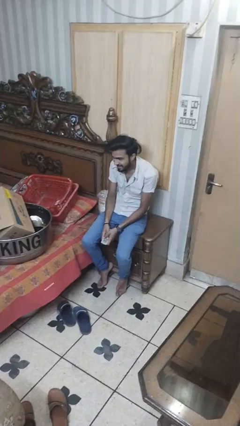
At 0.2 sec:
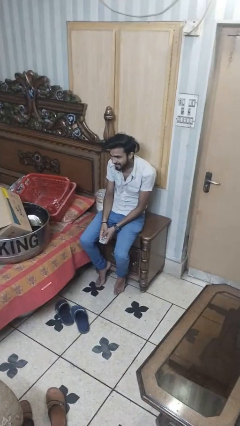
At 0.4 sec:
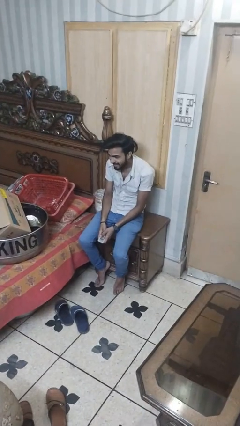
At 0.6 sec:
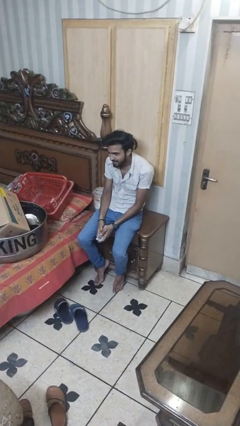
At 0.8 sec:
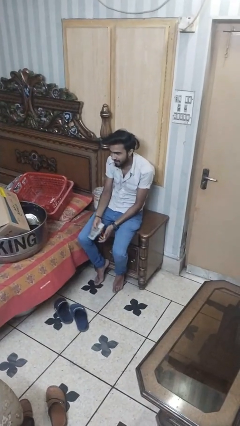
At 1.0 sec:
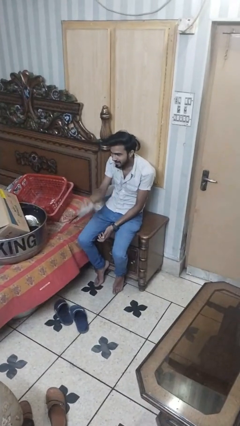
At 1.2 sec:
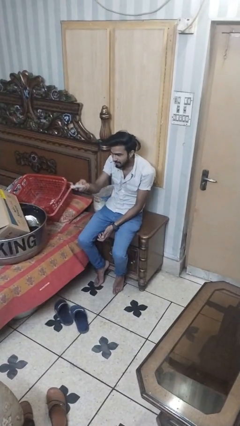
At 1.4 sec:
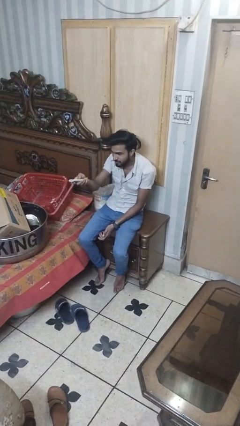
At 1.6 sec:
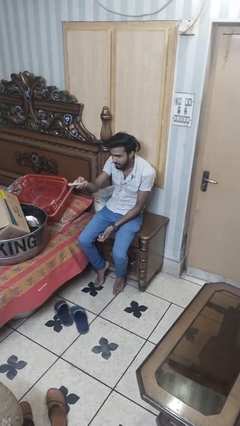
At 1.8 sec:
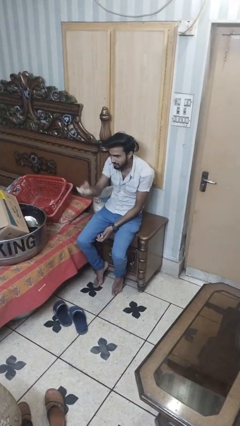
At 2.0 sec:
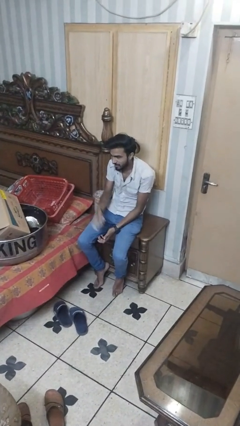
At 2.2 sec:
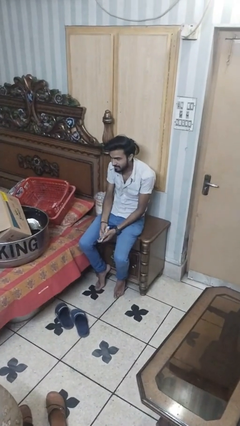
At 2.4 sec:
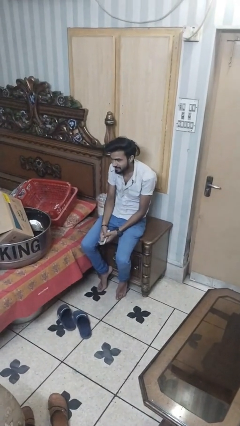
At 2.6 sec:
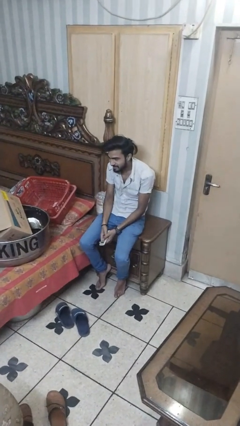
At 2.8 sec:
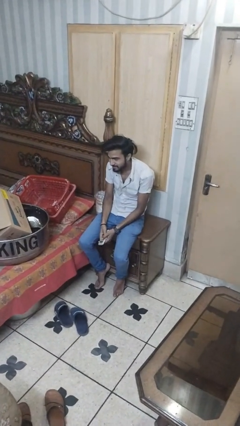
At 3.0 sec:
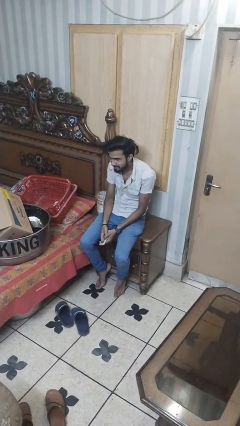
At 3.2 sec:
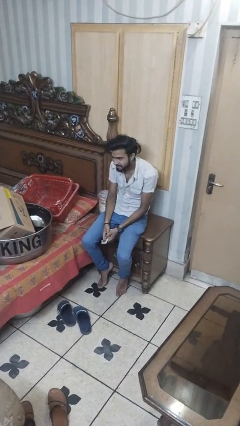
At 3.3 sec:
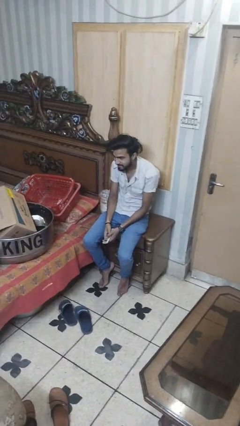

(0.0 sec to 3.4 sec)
person uses television remote

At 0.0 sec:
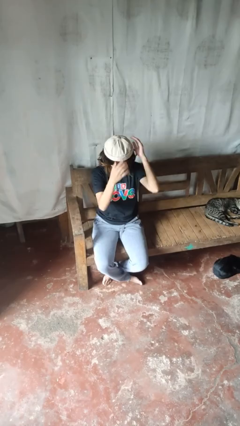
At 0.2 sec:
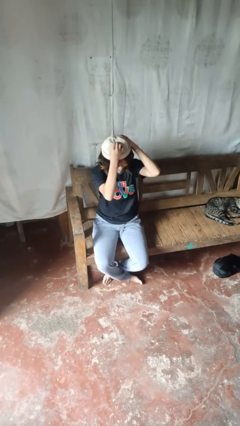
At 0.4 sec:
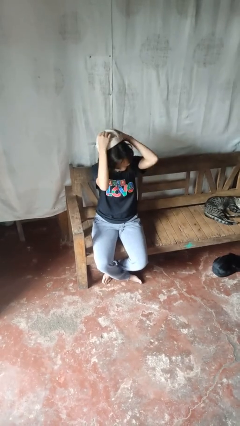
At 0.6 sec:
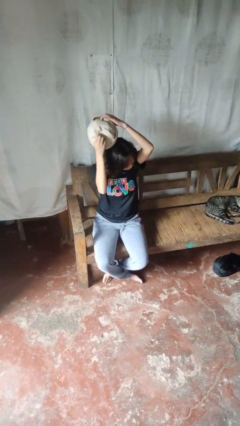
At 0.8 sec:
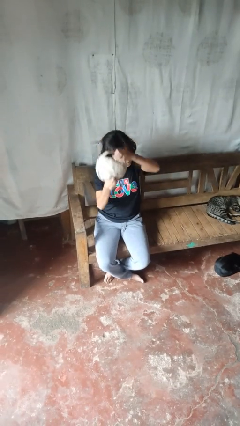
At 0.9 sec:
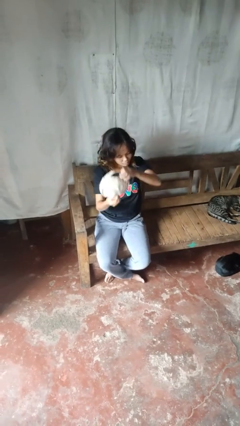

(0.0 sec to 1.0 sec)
person takes off hat

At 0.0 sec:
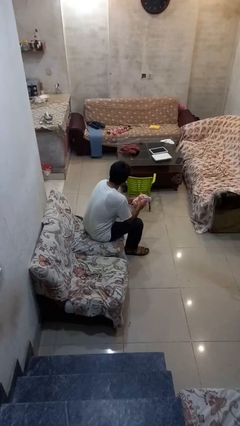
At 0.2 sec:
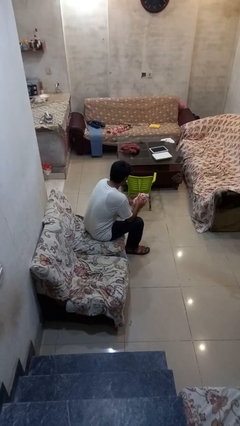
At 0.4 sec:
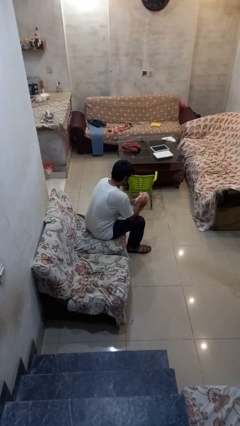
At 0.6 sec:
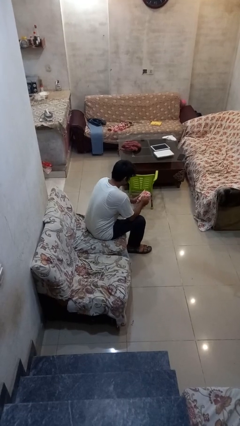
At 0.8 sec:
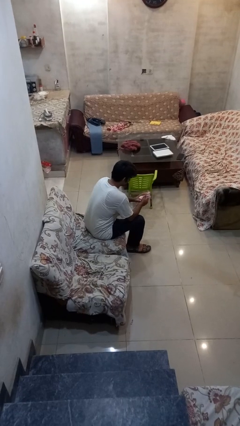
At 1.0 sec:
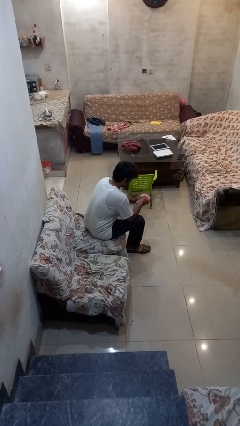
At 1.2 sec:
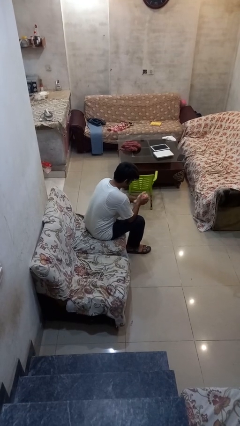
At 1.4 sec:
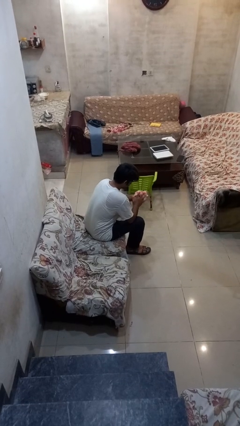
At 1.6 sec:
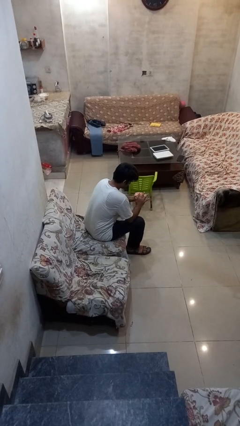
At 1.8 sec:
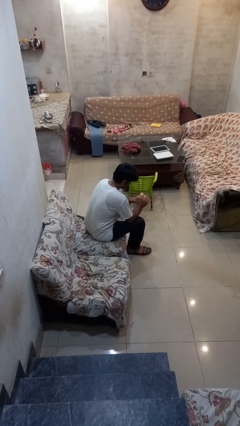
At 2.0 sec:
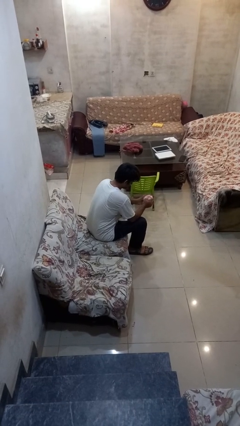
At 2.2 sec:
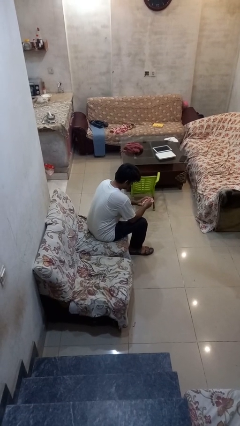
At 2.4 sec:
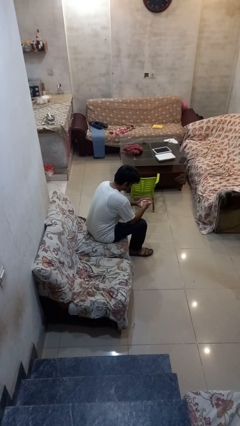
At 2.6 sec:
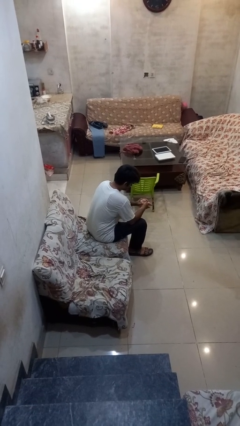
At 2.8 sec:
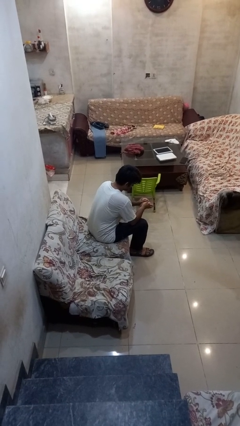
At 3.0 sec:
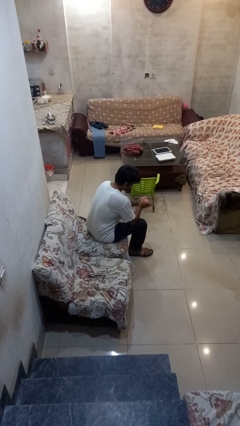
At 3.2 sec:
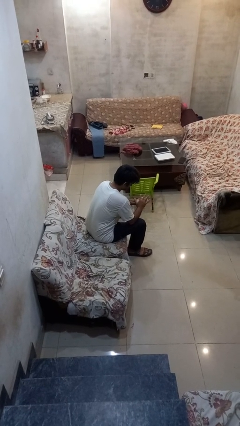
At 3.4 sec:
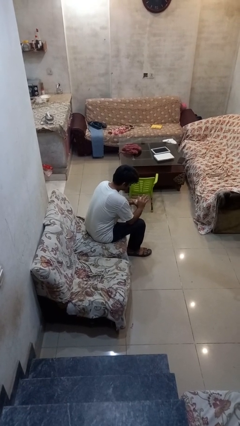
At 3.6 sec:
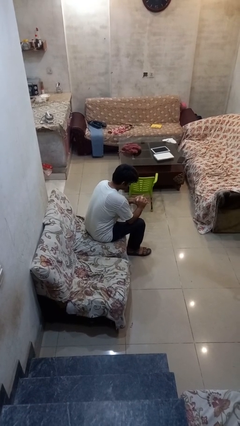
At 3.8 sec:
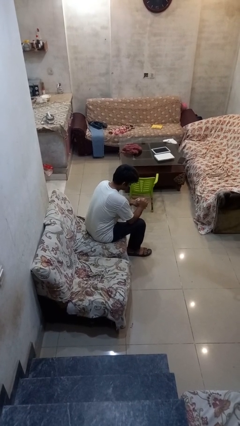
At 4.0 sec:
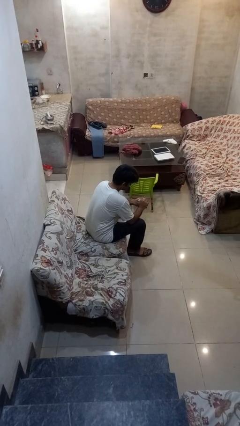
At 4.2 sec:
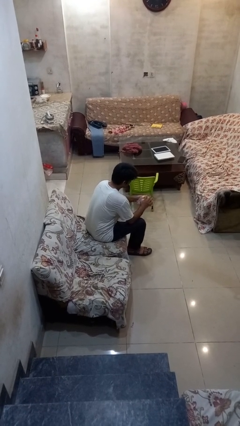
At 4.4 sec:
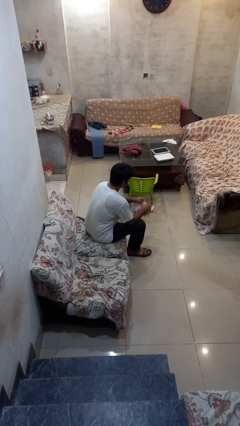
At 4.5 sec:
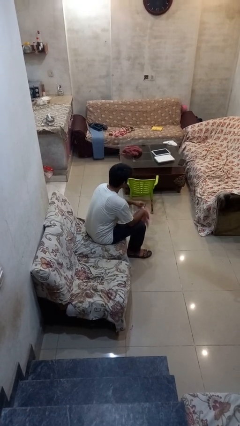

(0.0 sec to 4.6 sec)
person squeezes object

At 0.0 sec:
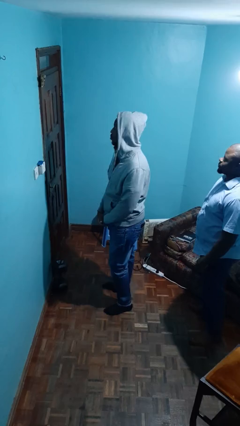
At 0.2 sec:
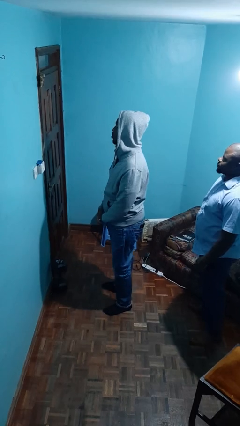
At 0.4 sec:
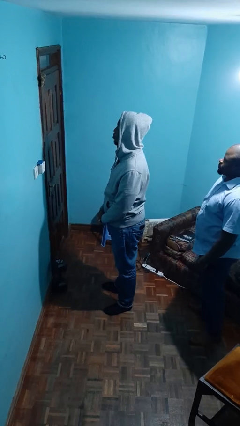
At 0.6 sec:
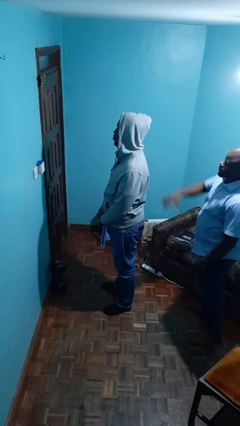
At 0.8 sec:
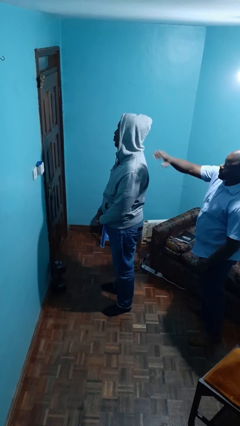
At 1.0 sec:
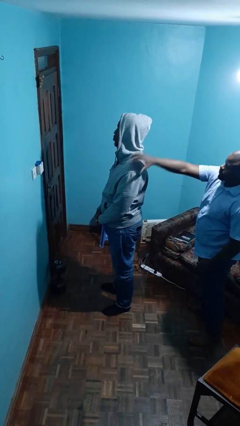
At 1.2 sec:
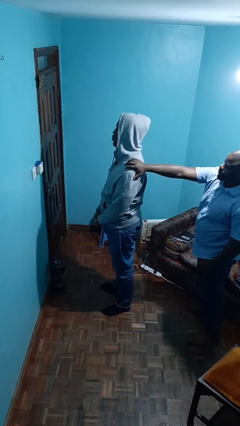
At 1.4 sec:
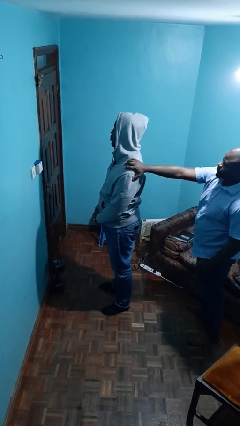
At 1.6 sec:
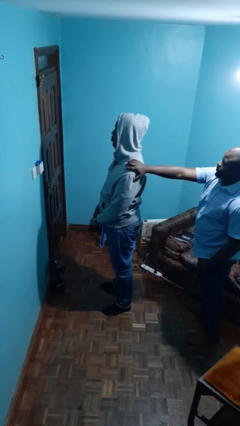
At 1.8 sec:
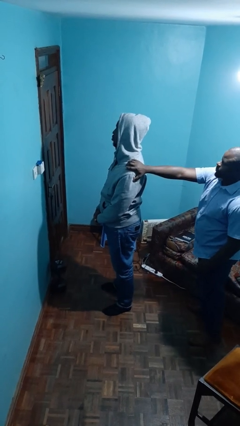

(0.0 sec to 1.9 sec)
person grabs person by shoulder

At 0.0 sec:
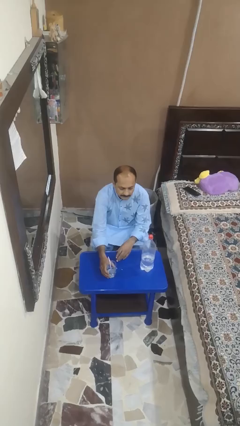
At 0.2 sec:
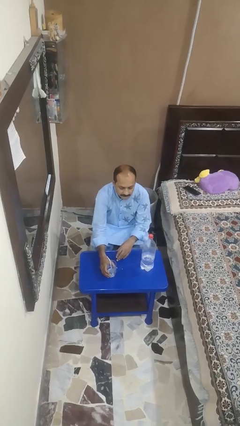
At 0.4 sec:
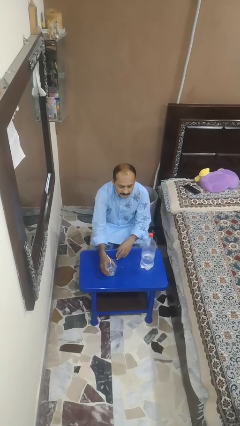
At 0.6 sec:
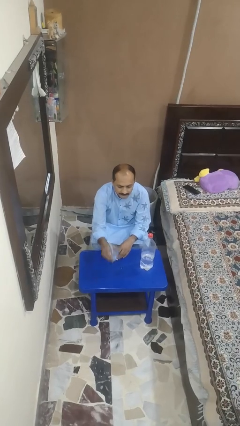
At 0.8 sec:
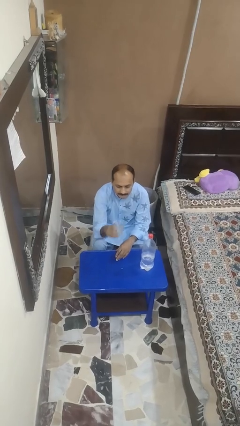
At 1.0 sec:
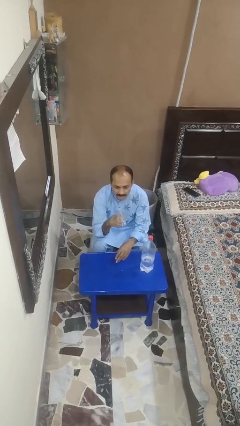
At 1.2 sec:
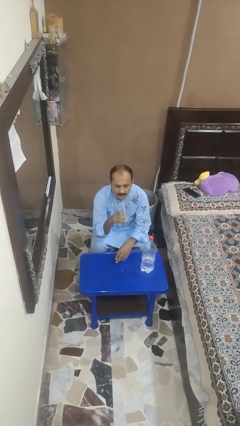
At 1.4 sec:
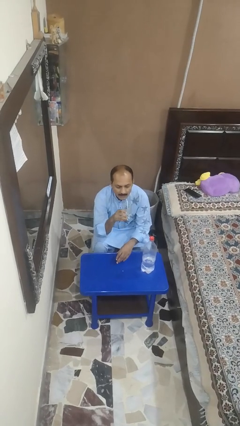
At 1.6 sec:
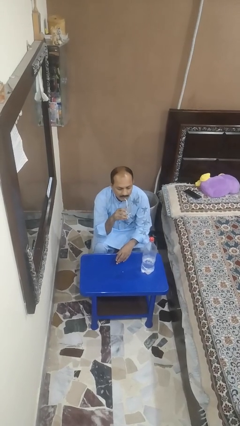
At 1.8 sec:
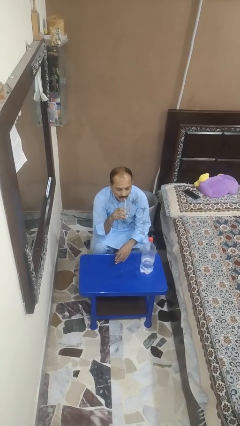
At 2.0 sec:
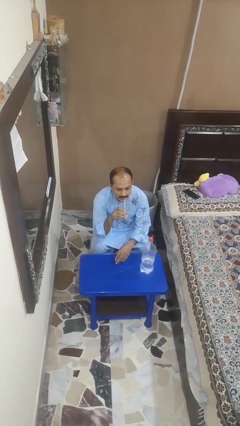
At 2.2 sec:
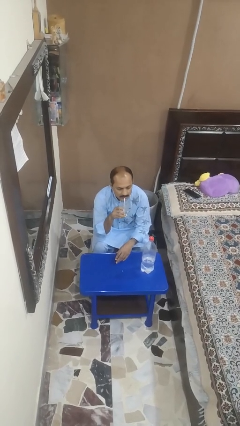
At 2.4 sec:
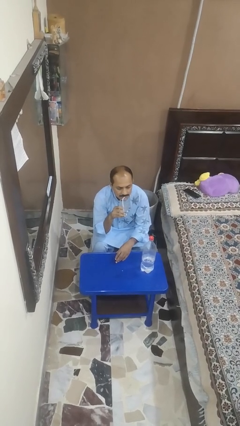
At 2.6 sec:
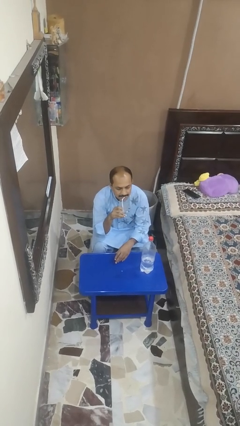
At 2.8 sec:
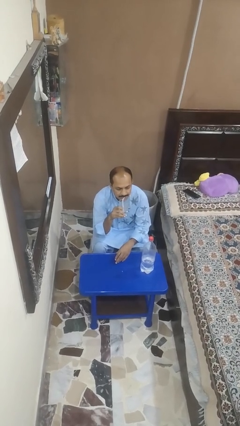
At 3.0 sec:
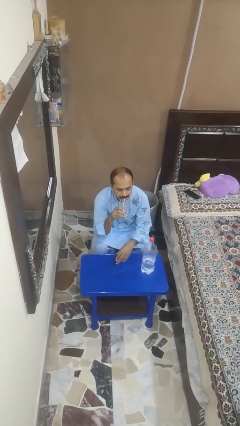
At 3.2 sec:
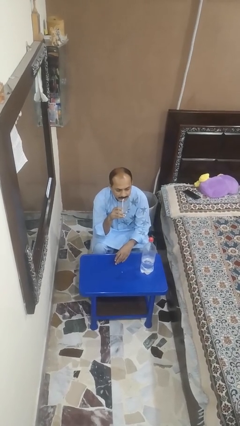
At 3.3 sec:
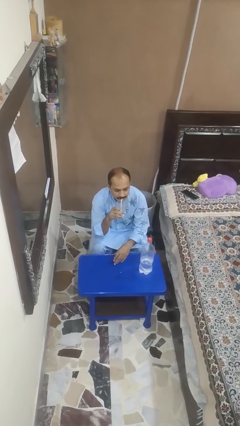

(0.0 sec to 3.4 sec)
person drinks from straw

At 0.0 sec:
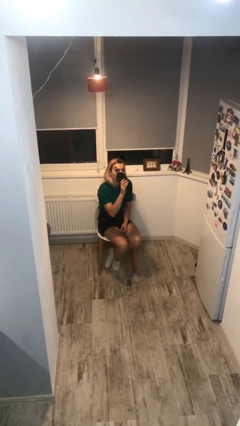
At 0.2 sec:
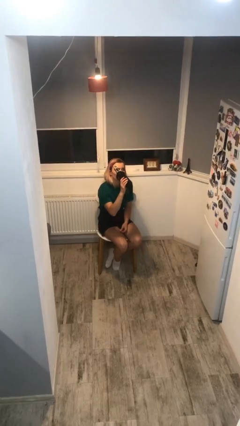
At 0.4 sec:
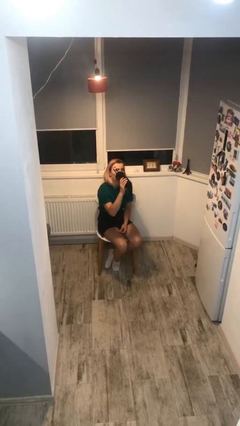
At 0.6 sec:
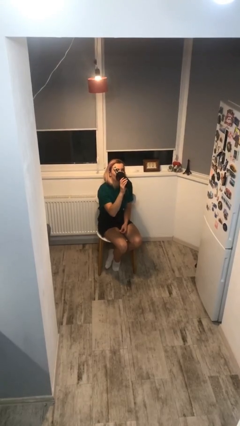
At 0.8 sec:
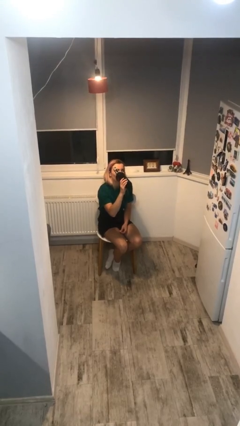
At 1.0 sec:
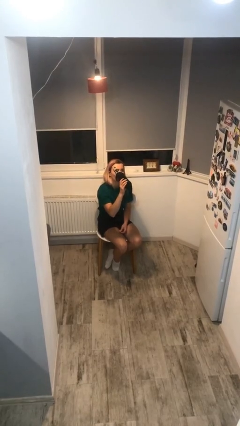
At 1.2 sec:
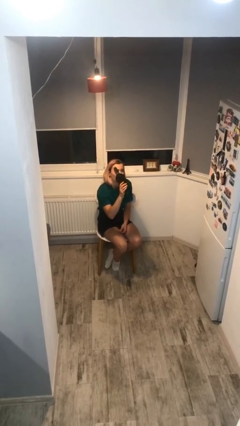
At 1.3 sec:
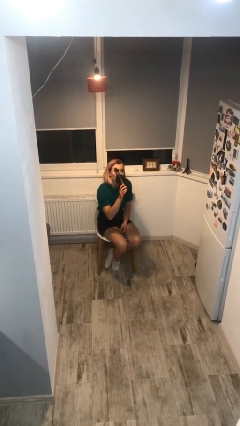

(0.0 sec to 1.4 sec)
person drinks from bottle

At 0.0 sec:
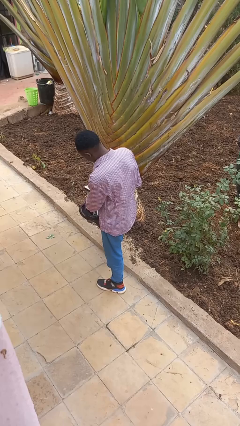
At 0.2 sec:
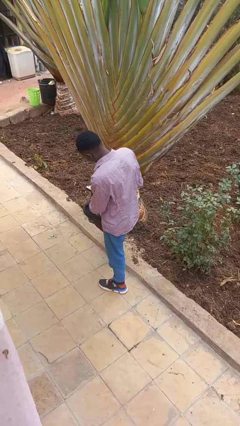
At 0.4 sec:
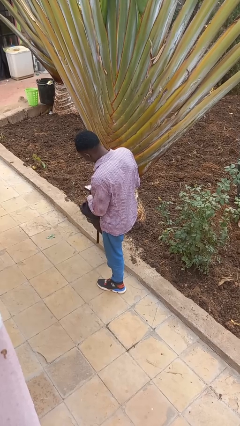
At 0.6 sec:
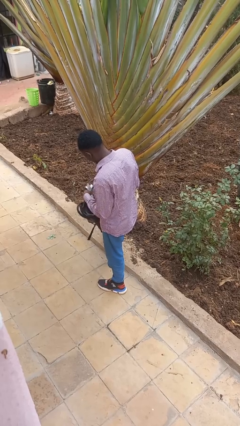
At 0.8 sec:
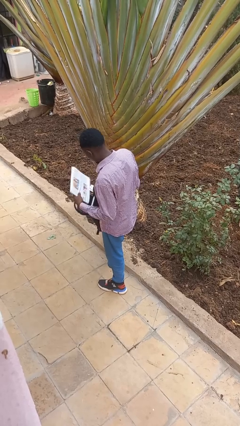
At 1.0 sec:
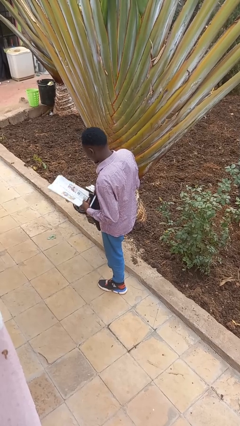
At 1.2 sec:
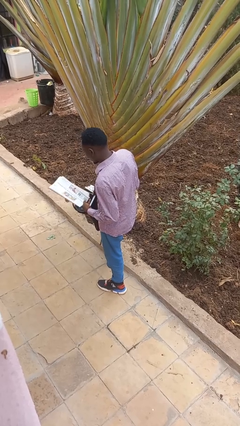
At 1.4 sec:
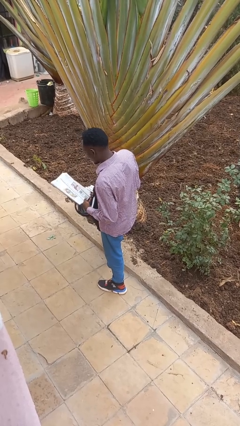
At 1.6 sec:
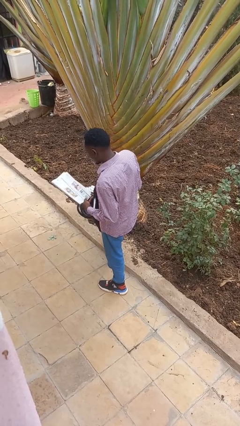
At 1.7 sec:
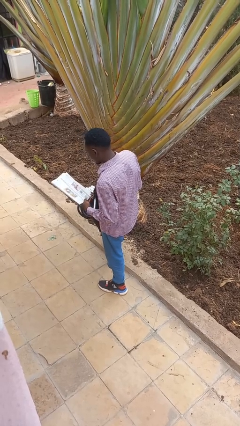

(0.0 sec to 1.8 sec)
person takes object from backpack
